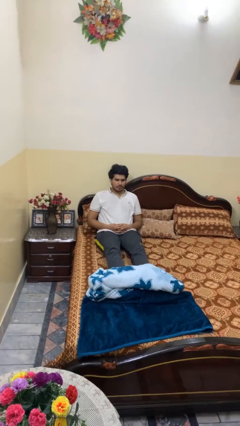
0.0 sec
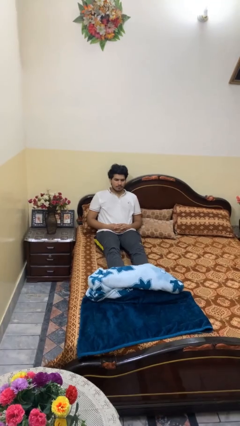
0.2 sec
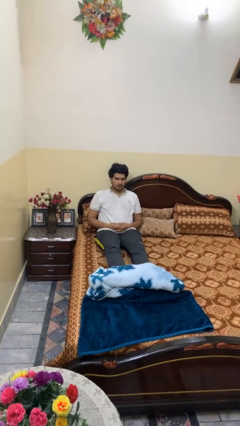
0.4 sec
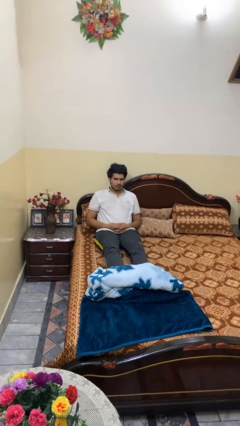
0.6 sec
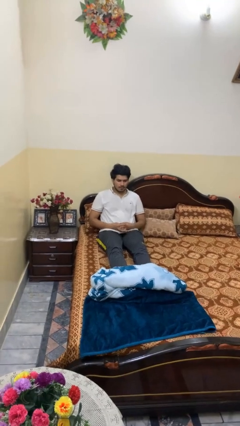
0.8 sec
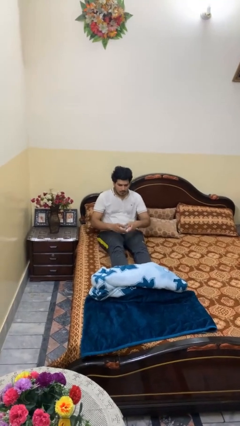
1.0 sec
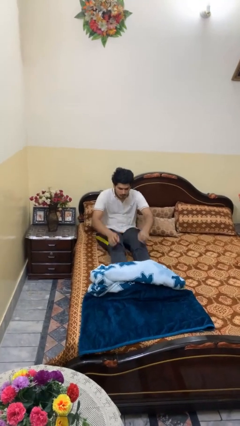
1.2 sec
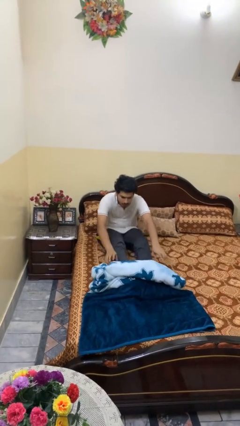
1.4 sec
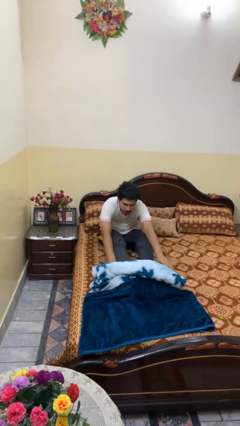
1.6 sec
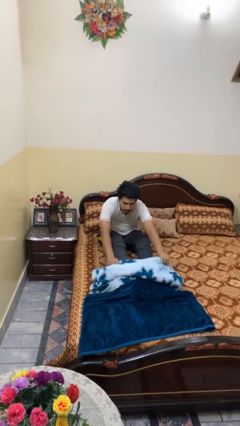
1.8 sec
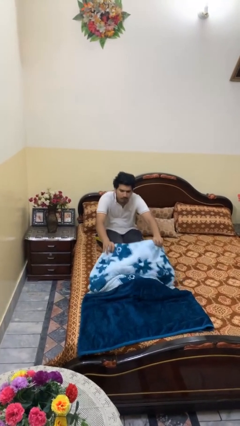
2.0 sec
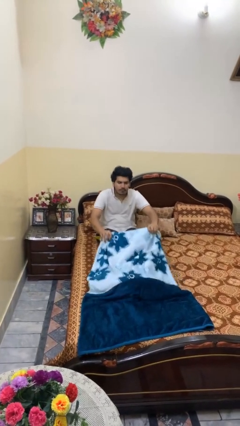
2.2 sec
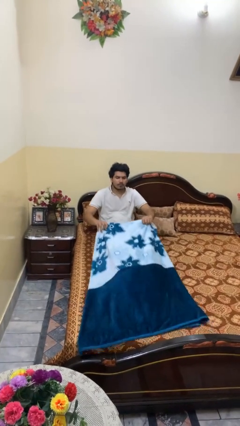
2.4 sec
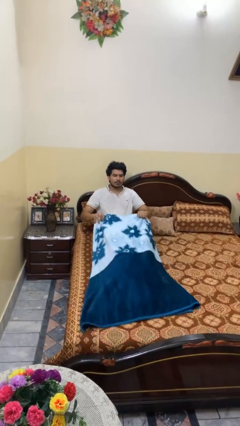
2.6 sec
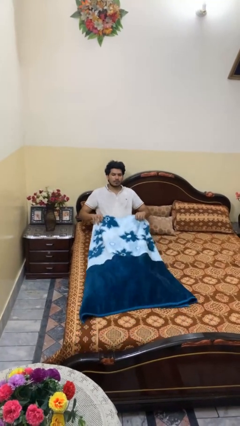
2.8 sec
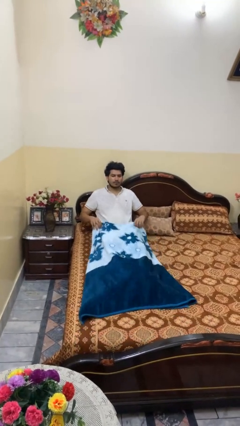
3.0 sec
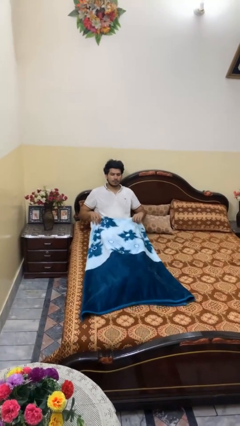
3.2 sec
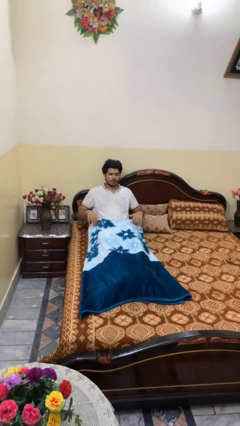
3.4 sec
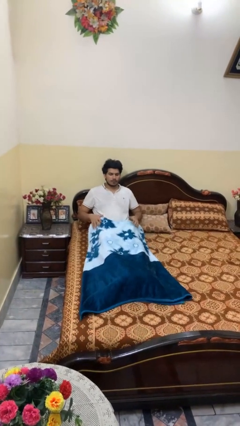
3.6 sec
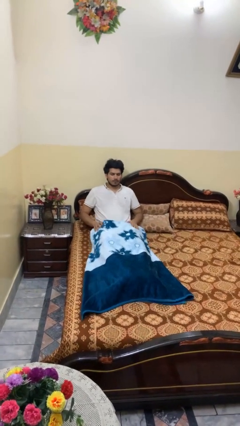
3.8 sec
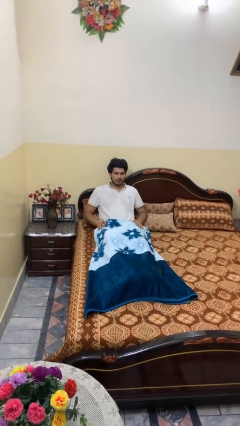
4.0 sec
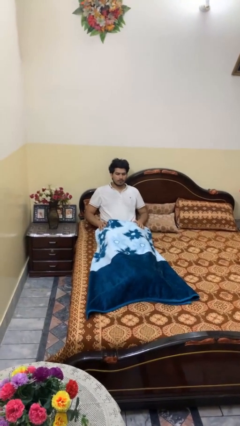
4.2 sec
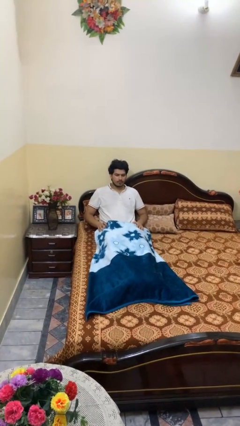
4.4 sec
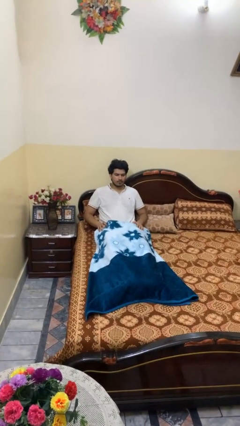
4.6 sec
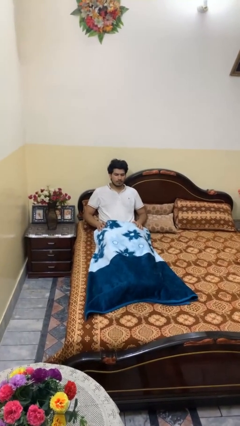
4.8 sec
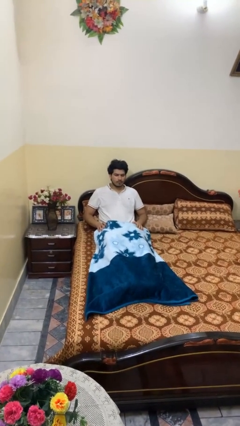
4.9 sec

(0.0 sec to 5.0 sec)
person covers with blanket

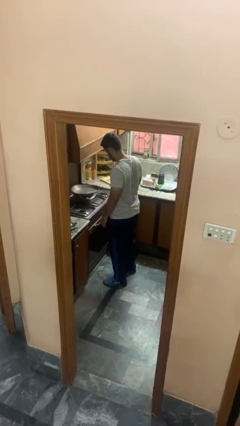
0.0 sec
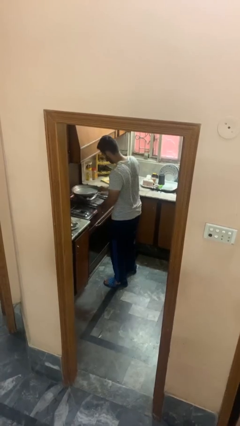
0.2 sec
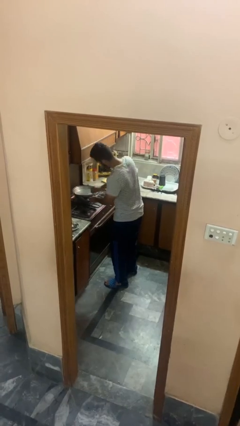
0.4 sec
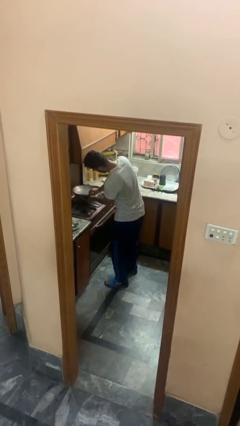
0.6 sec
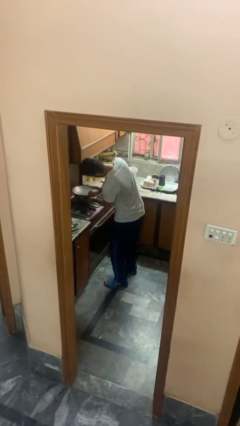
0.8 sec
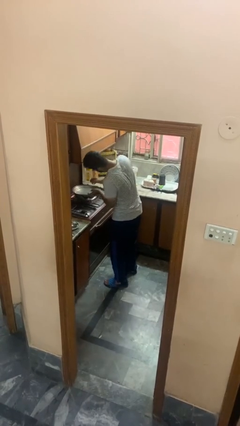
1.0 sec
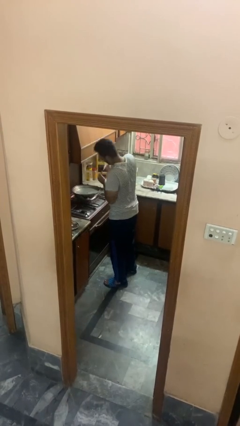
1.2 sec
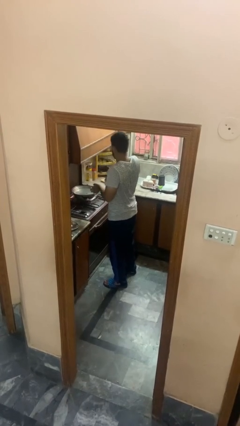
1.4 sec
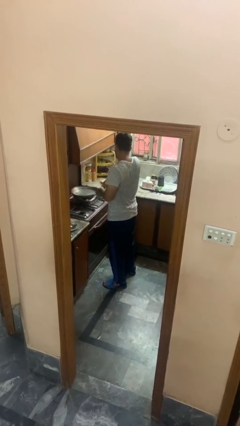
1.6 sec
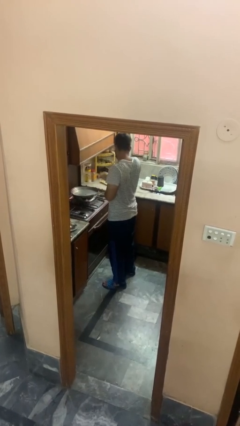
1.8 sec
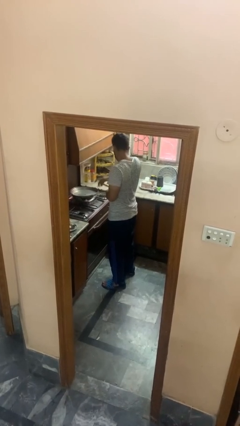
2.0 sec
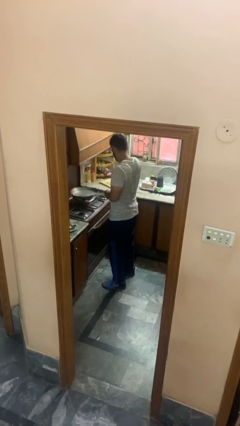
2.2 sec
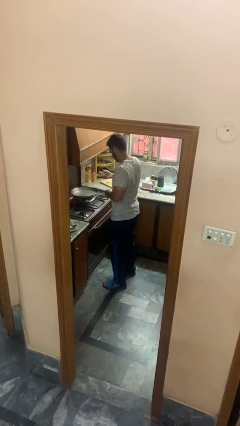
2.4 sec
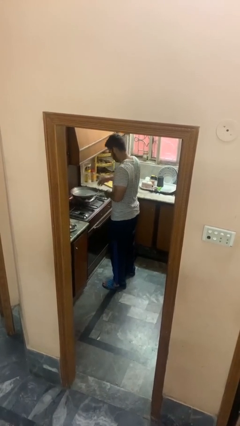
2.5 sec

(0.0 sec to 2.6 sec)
person burns hand

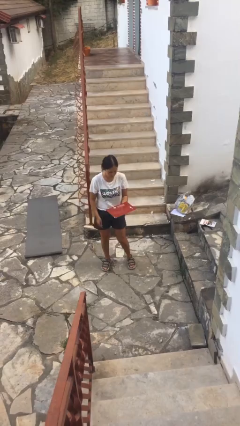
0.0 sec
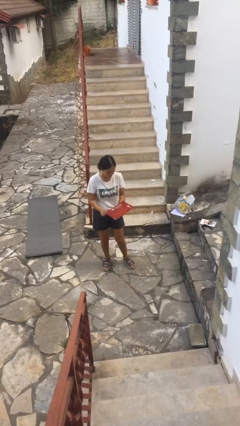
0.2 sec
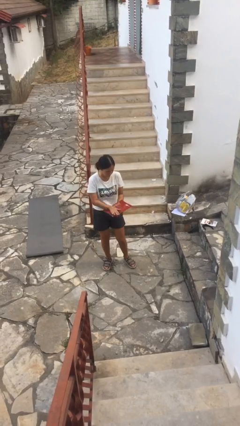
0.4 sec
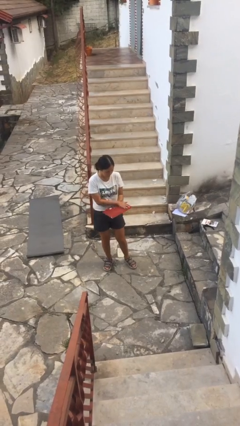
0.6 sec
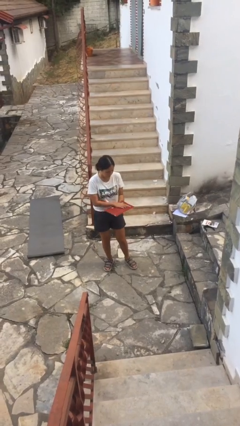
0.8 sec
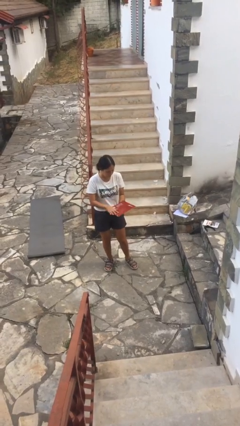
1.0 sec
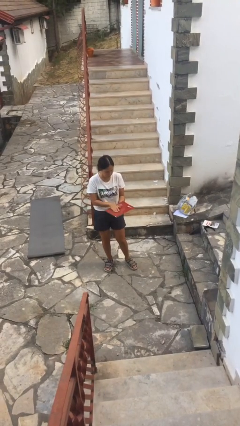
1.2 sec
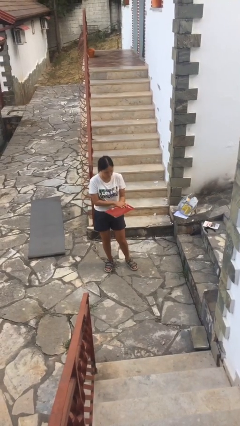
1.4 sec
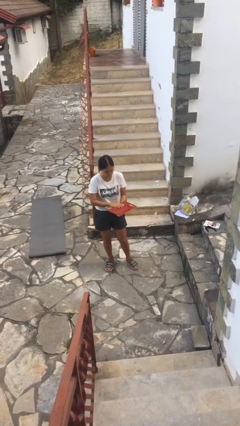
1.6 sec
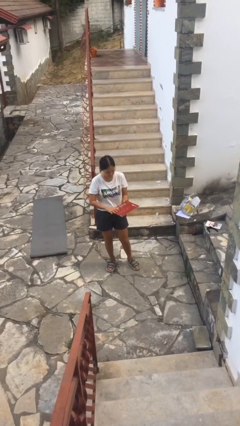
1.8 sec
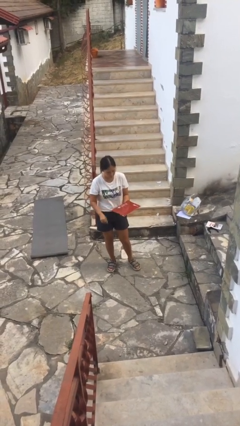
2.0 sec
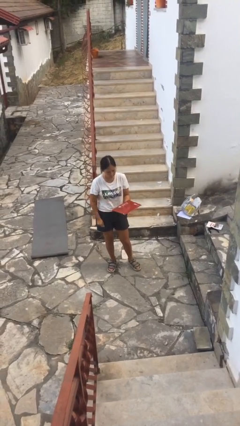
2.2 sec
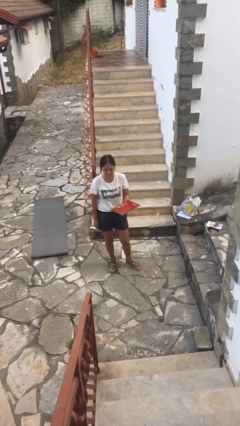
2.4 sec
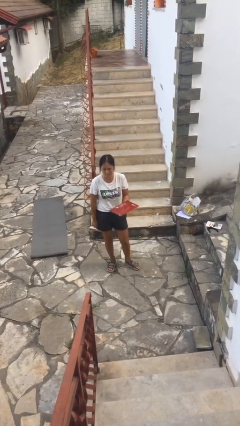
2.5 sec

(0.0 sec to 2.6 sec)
person waves hand over object

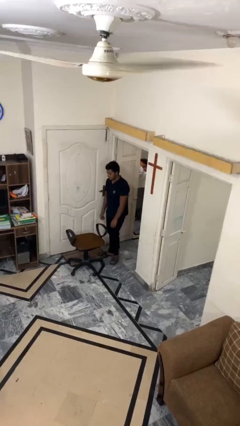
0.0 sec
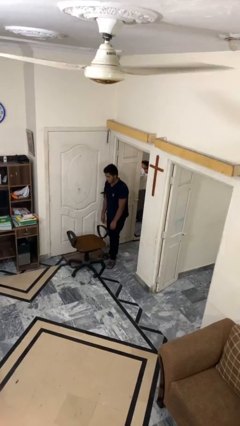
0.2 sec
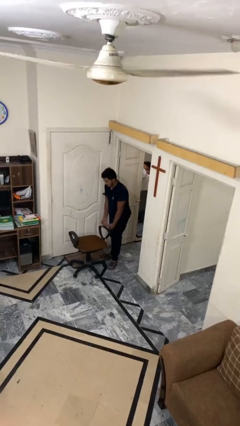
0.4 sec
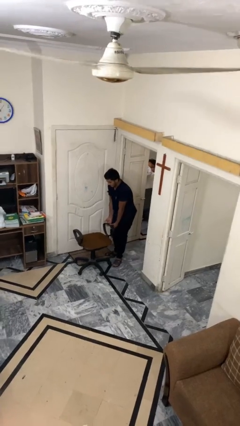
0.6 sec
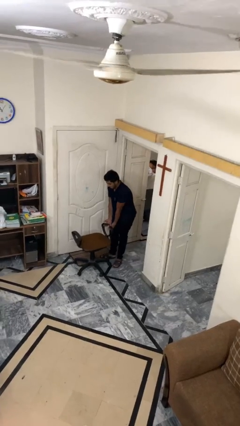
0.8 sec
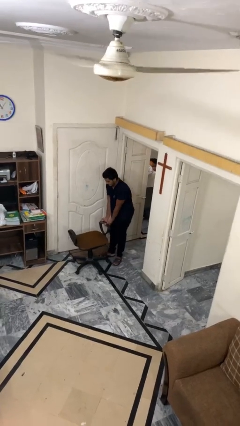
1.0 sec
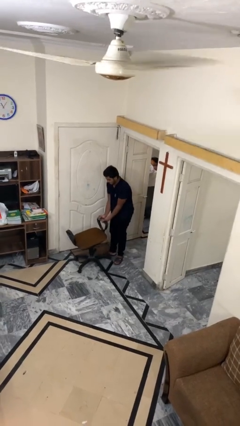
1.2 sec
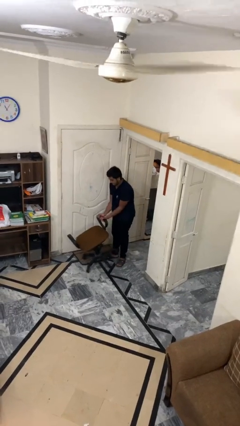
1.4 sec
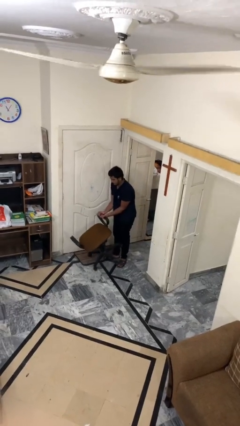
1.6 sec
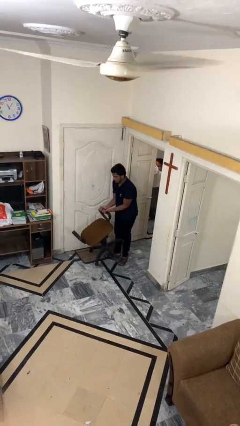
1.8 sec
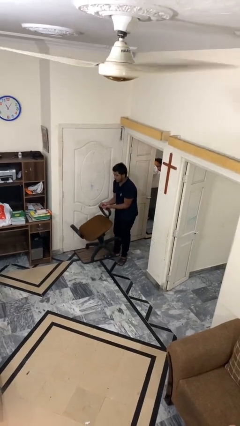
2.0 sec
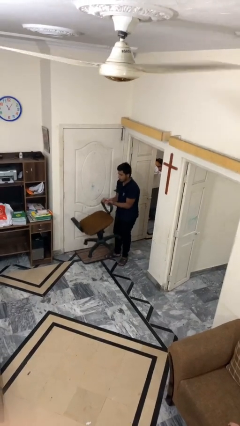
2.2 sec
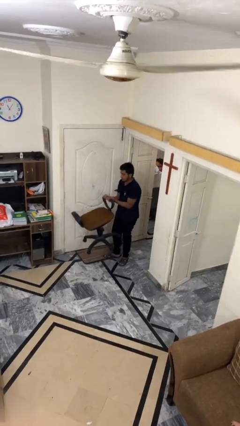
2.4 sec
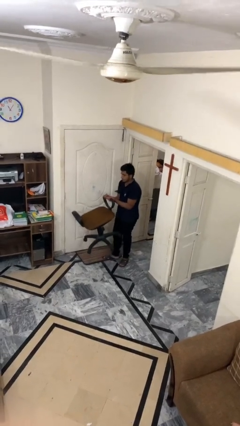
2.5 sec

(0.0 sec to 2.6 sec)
person picks up object from floor

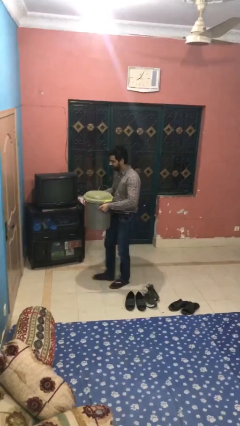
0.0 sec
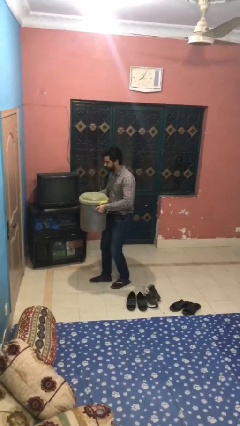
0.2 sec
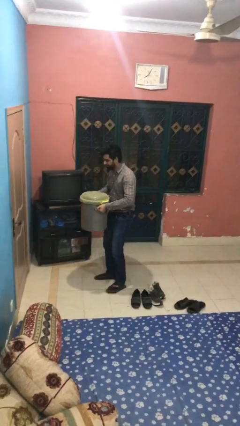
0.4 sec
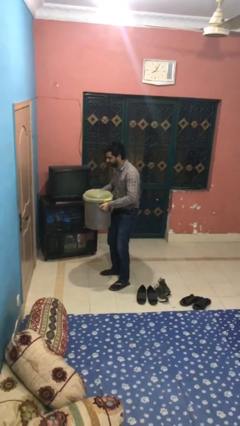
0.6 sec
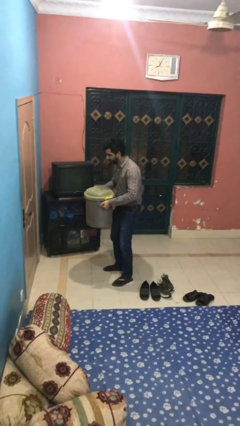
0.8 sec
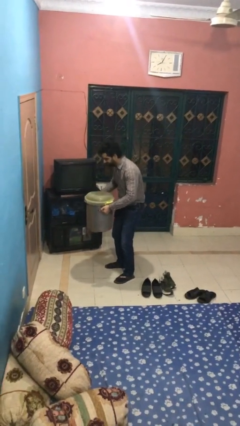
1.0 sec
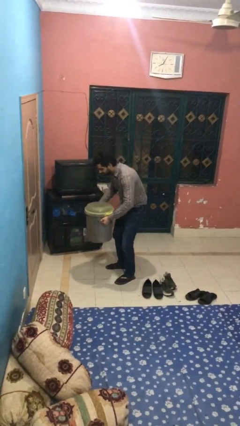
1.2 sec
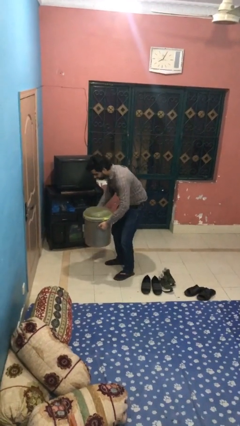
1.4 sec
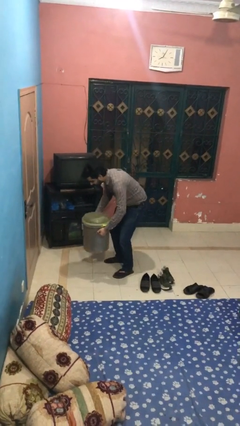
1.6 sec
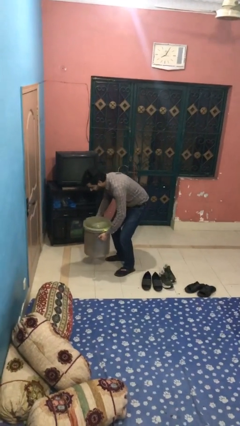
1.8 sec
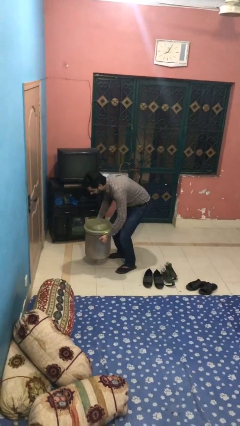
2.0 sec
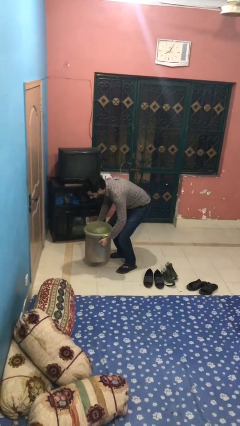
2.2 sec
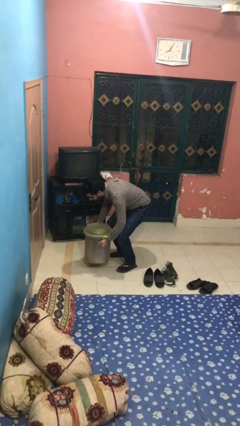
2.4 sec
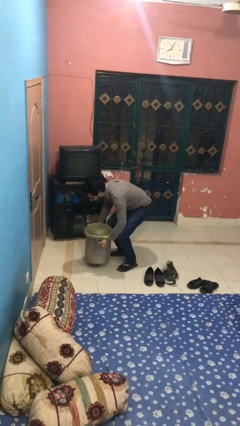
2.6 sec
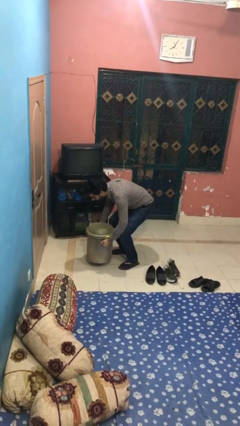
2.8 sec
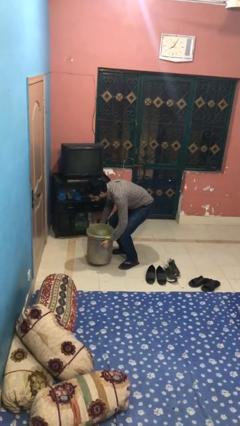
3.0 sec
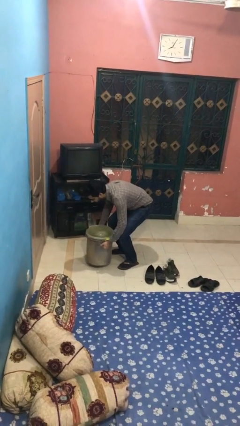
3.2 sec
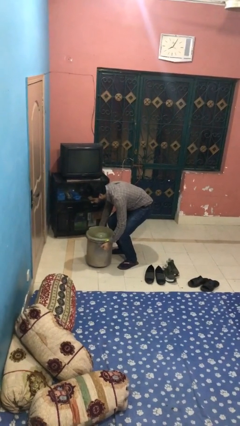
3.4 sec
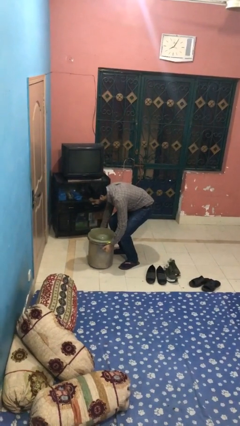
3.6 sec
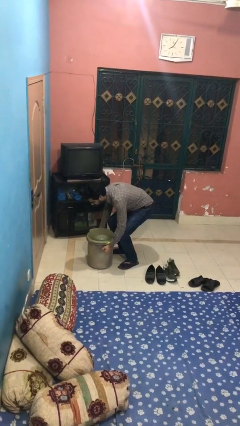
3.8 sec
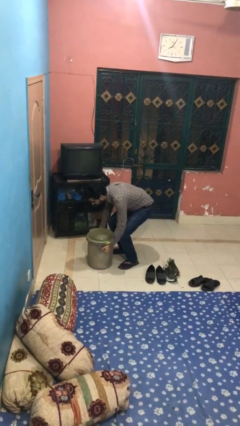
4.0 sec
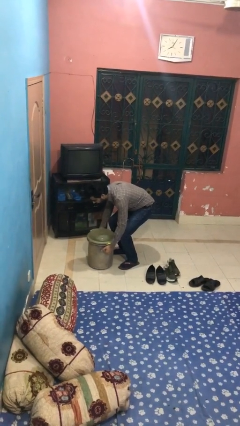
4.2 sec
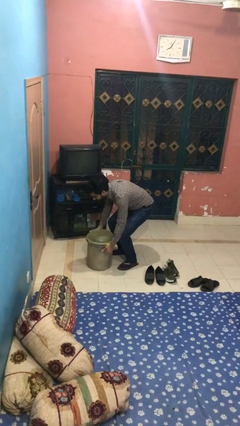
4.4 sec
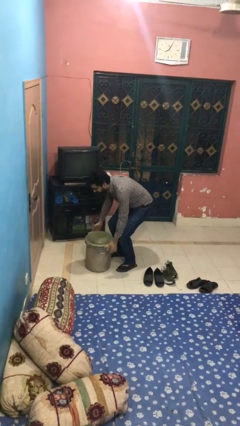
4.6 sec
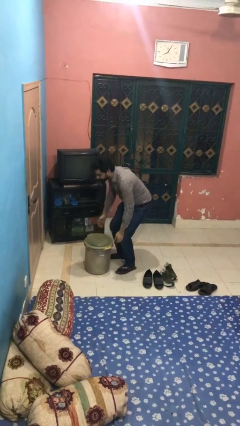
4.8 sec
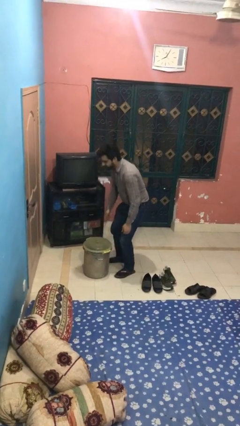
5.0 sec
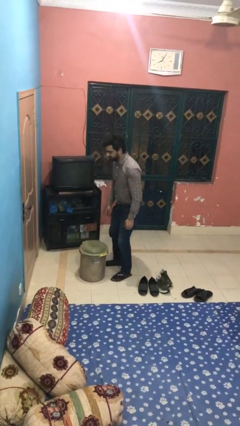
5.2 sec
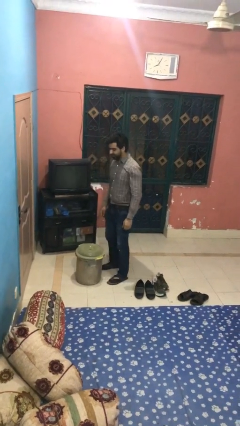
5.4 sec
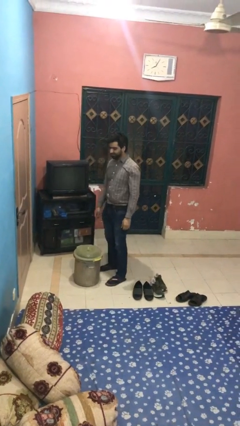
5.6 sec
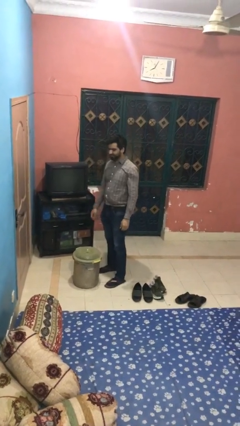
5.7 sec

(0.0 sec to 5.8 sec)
person puts down object on floor
